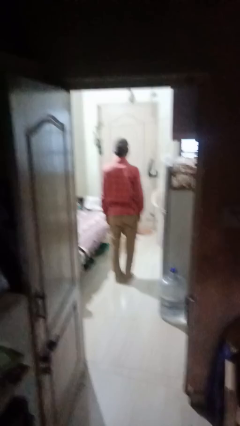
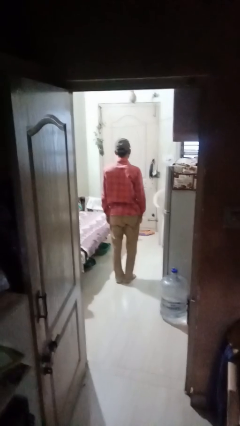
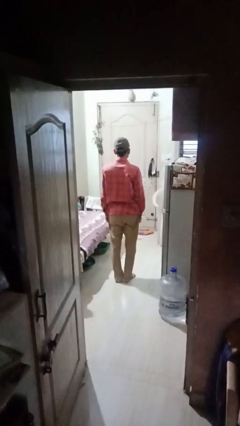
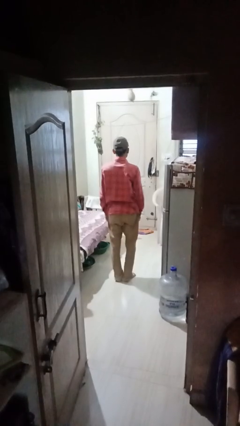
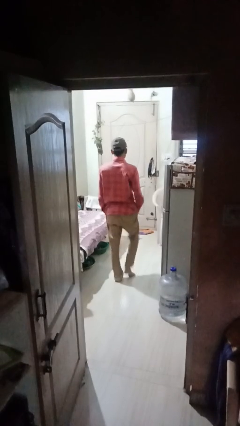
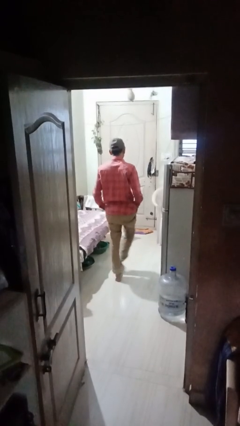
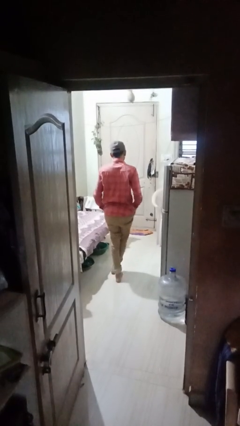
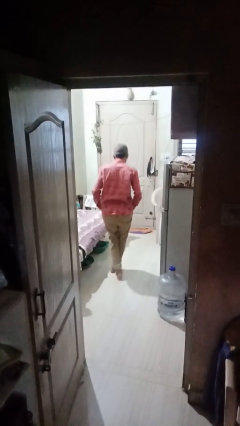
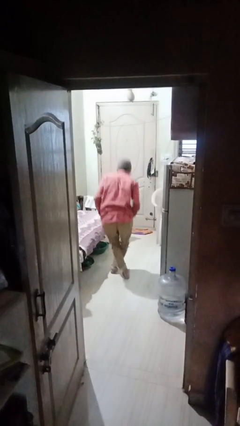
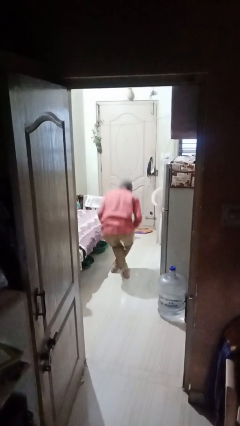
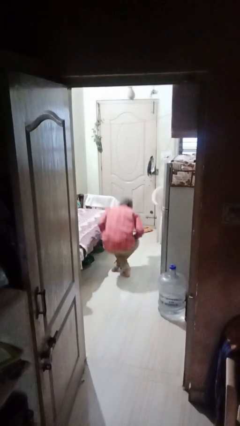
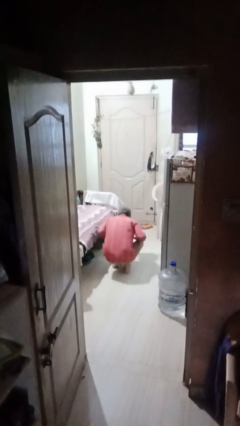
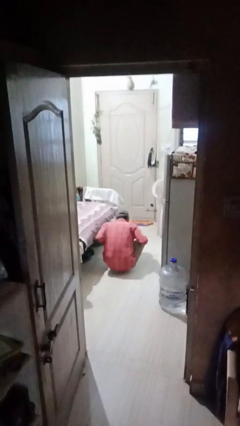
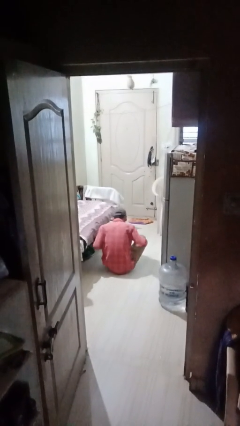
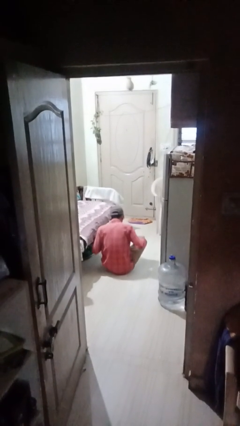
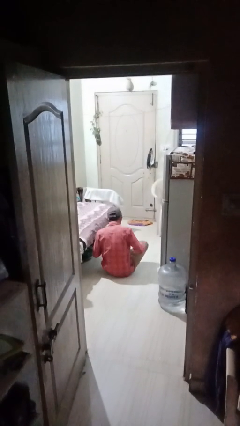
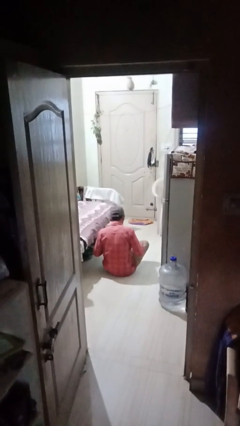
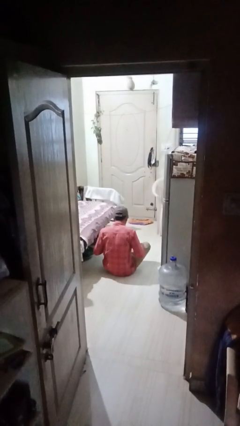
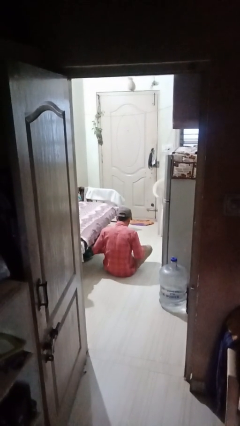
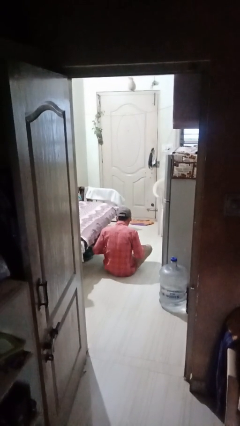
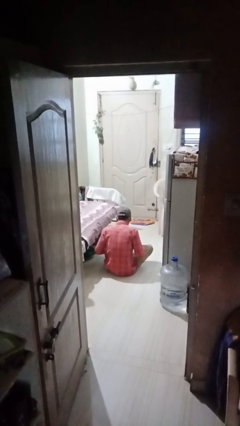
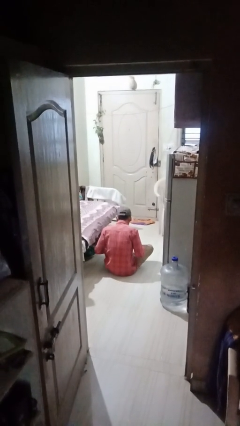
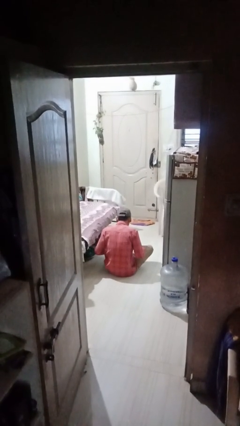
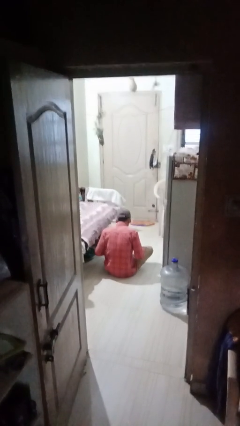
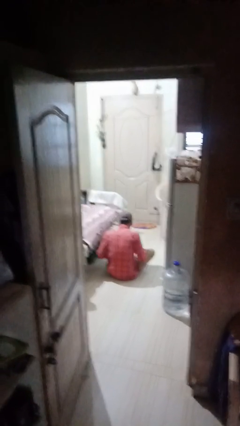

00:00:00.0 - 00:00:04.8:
person sits crisscross

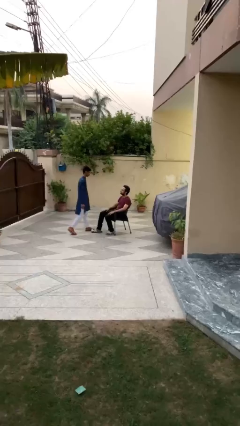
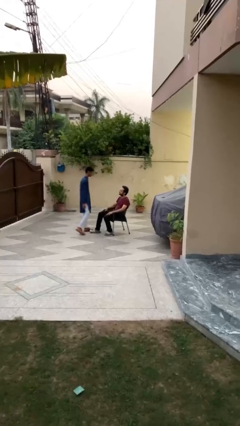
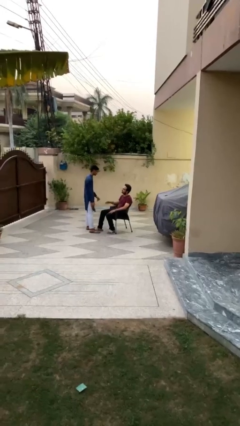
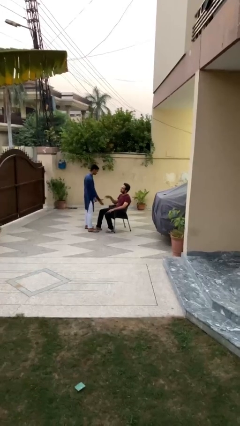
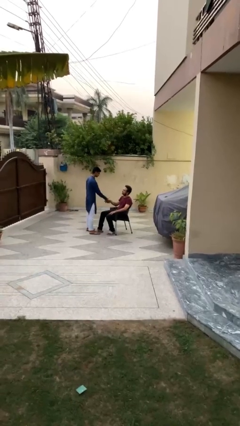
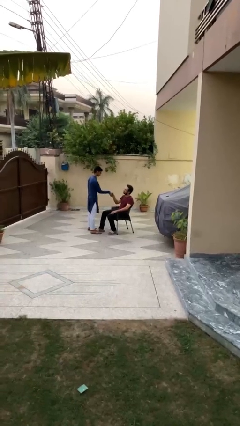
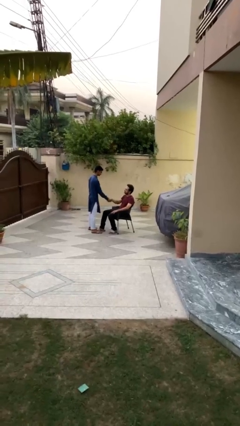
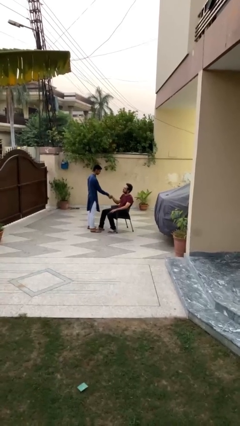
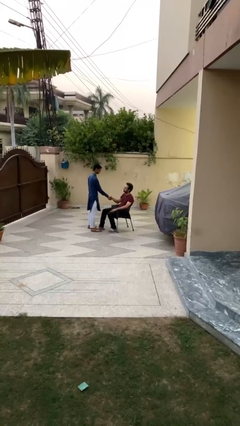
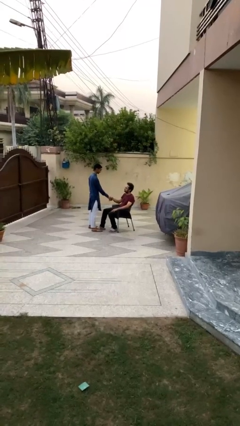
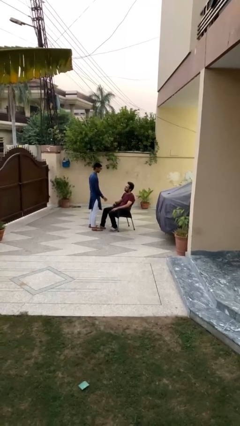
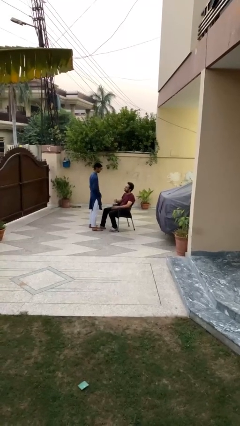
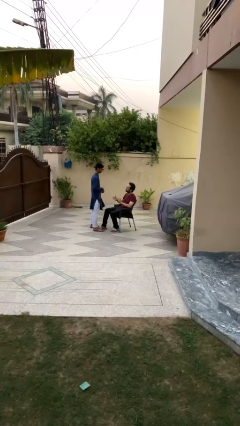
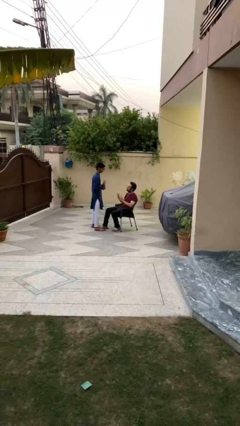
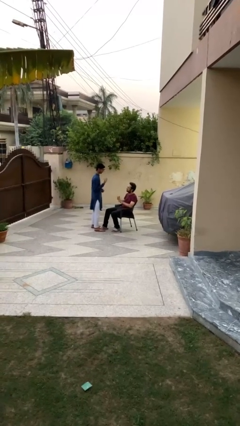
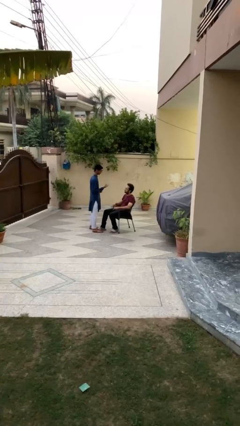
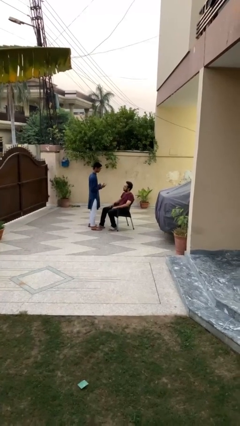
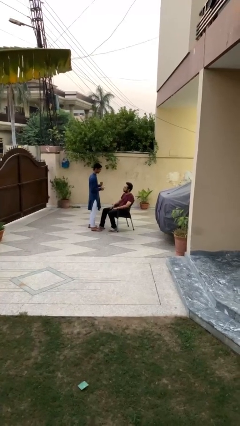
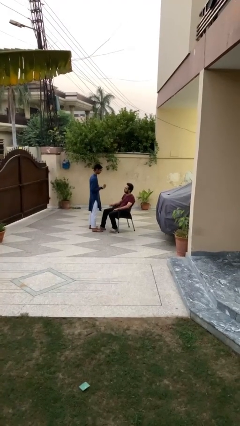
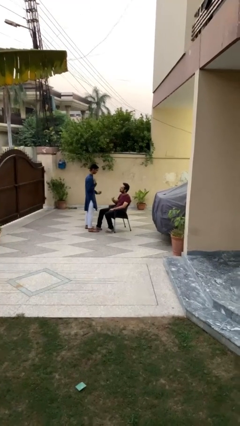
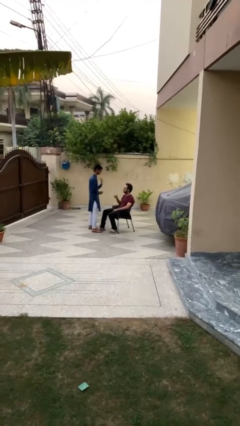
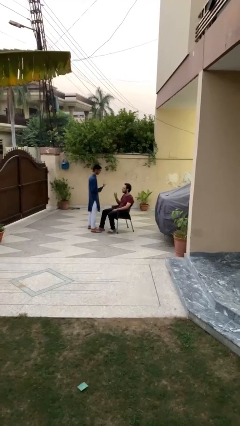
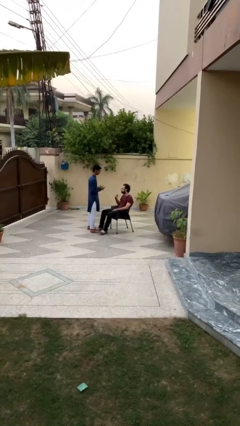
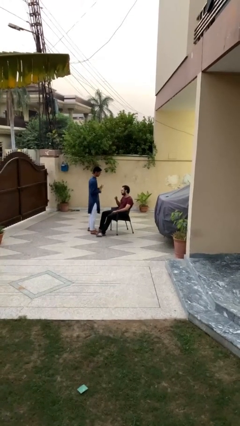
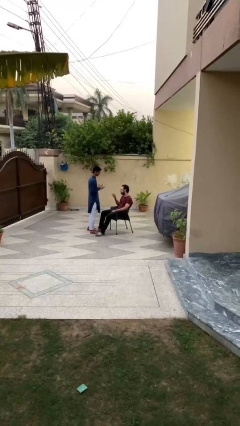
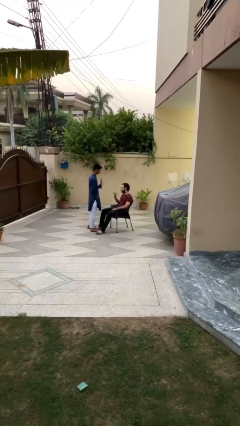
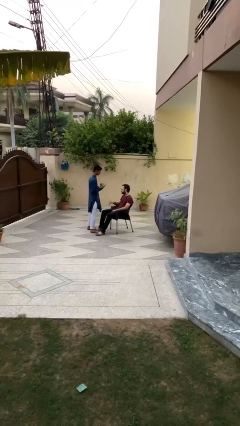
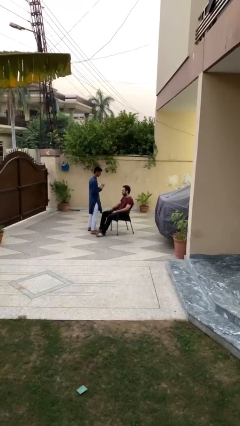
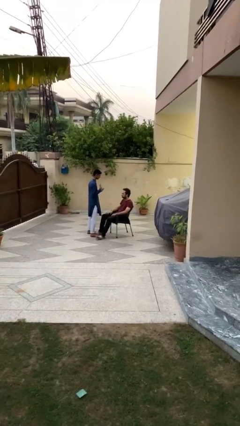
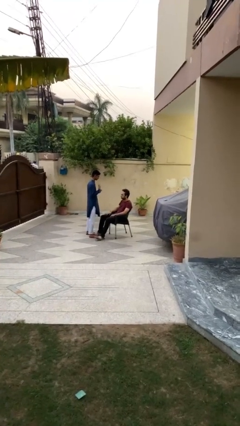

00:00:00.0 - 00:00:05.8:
person shakes hand

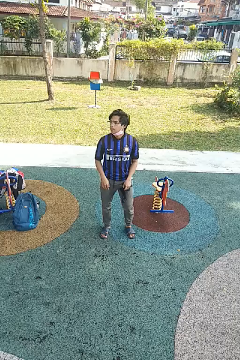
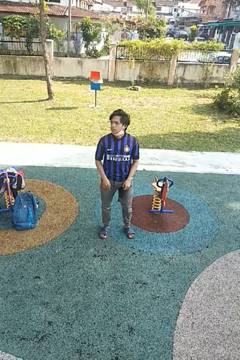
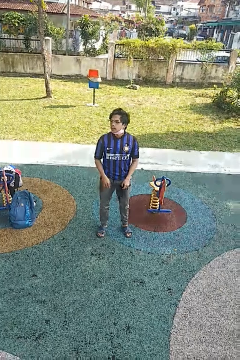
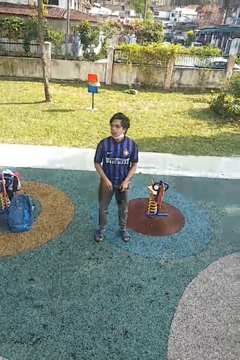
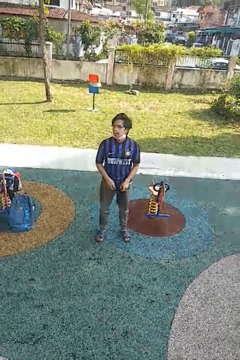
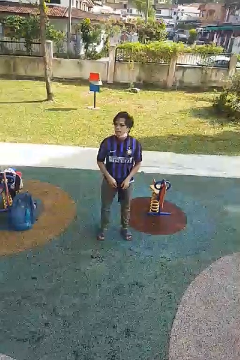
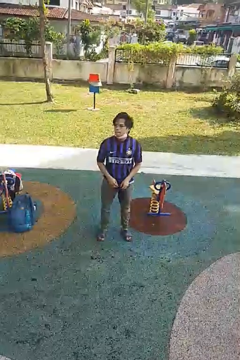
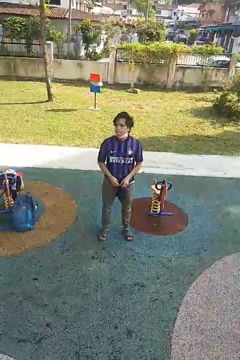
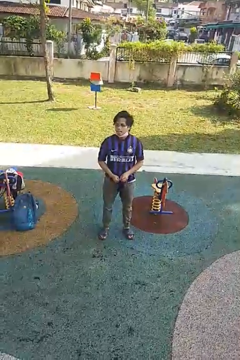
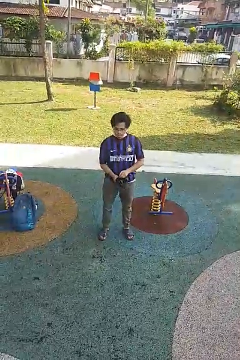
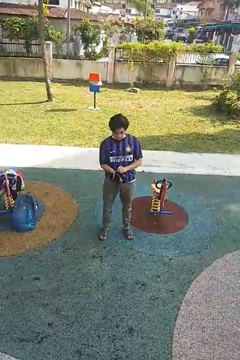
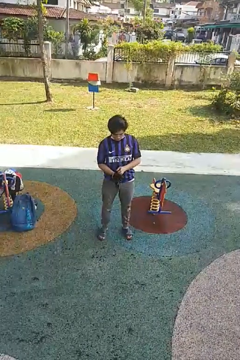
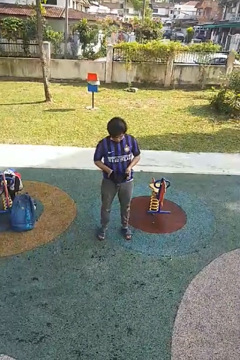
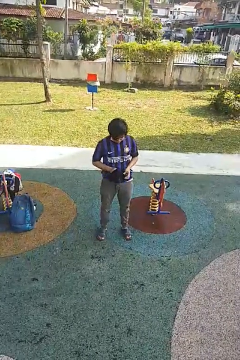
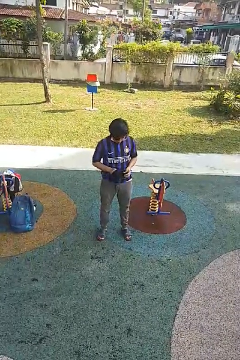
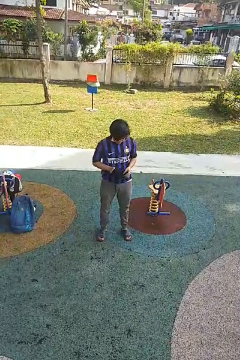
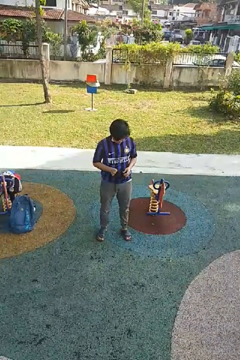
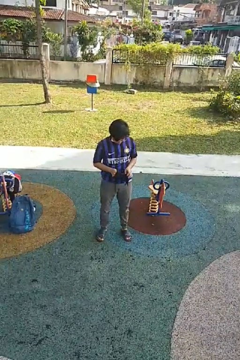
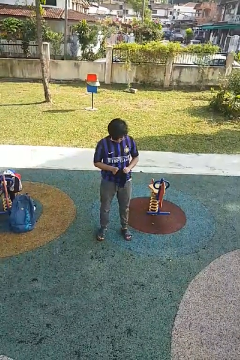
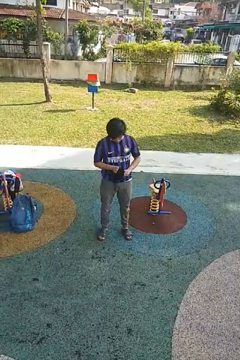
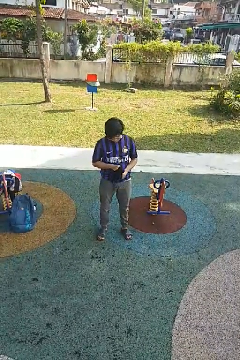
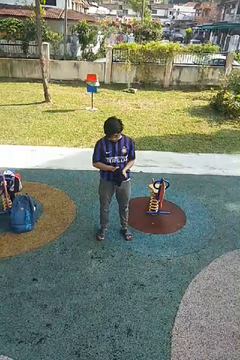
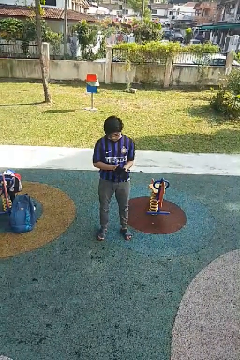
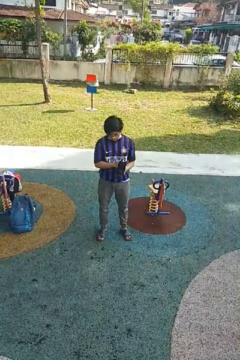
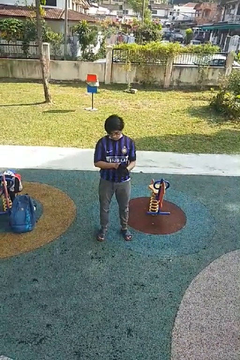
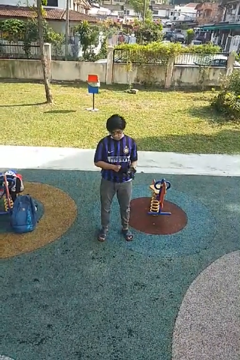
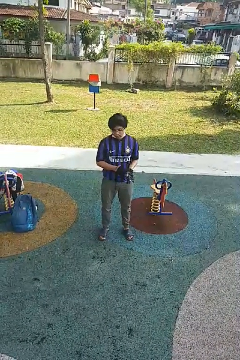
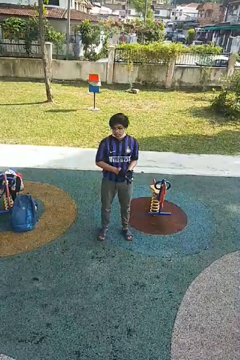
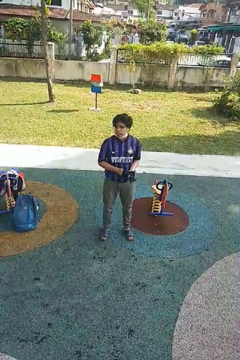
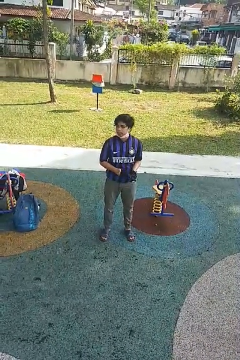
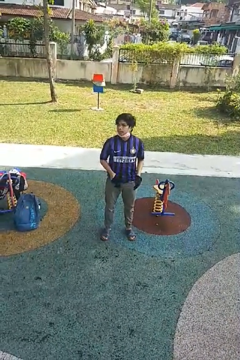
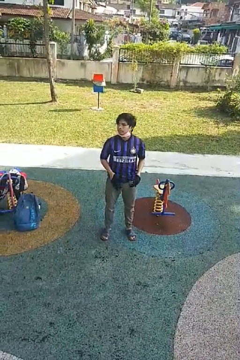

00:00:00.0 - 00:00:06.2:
person puts on gloves

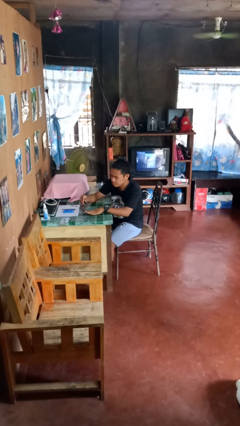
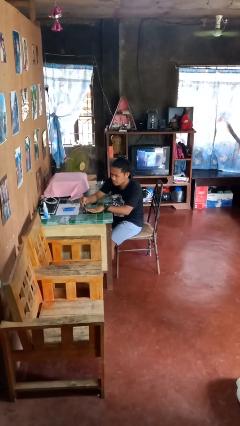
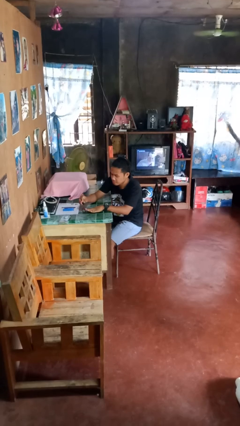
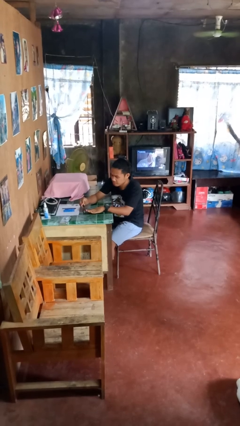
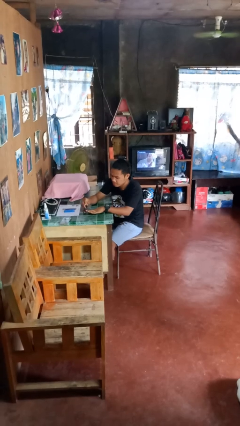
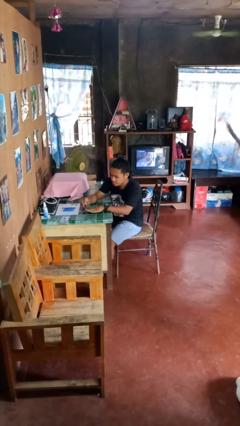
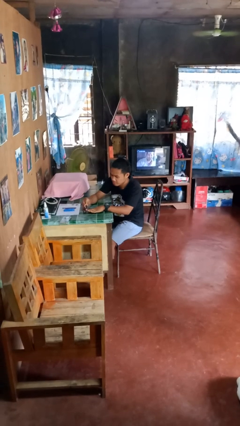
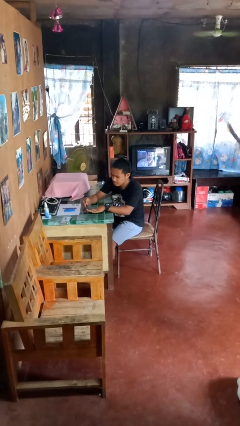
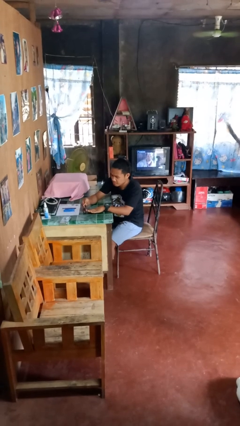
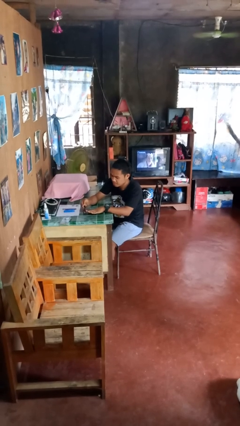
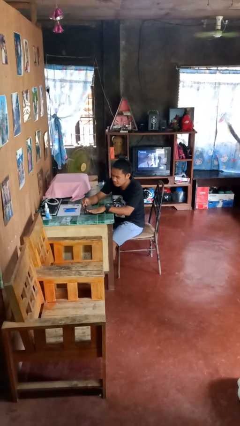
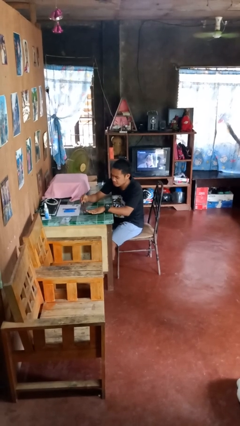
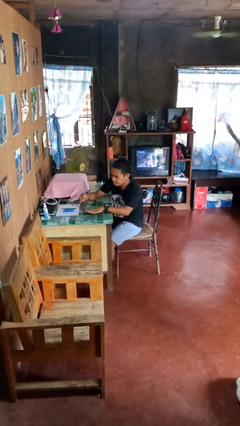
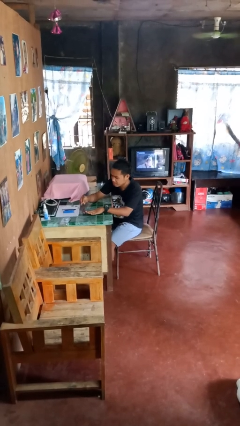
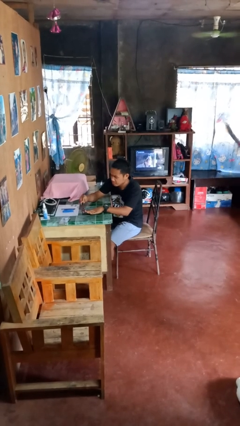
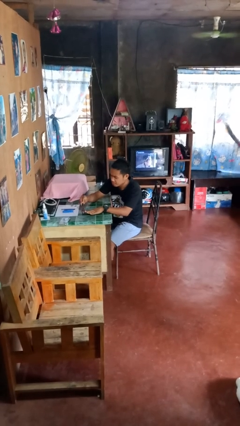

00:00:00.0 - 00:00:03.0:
person paints fingernails
